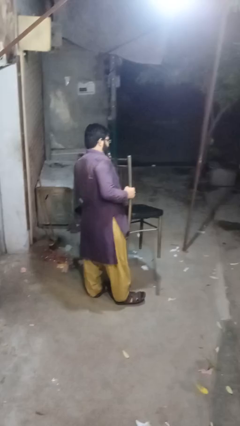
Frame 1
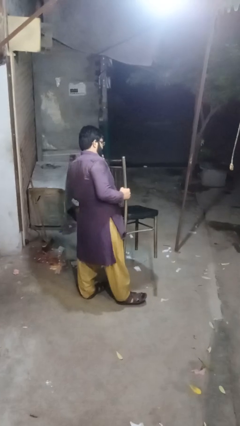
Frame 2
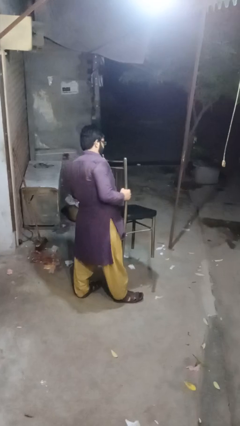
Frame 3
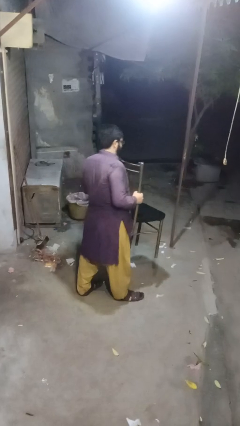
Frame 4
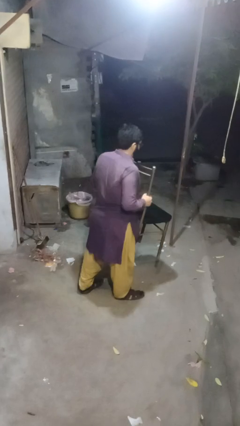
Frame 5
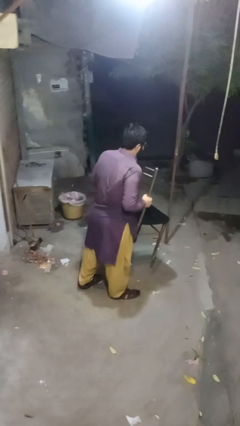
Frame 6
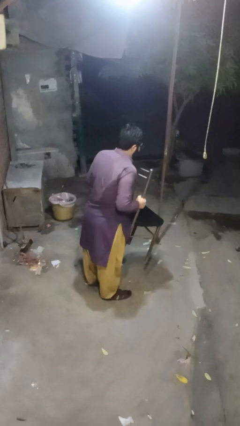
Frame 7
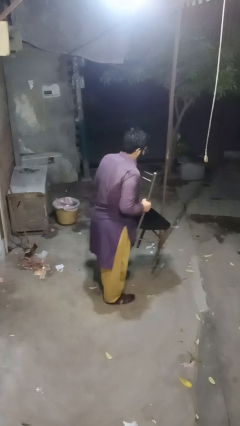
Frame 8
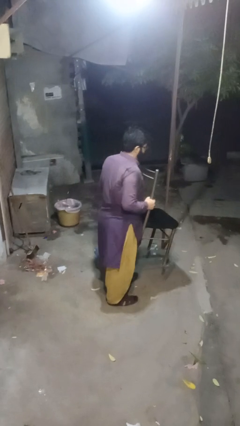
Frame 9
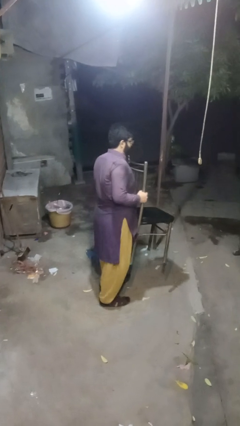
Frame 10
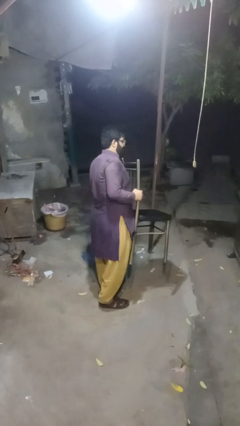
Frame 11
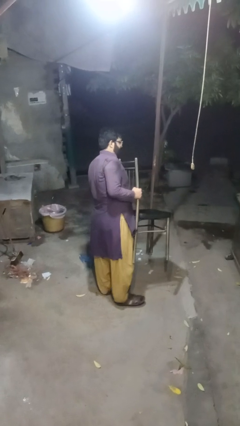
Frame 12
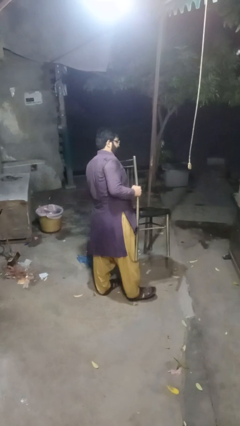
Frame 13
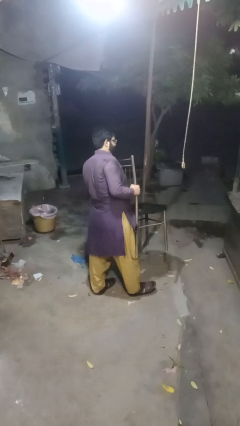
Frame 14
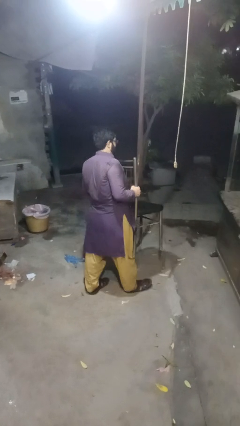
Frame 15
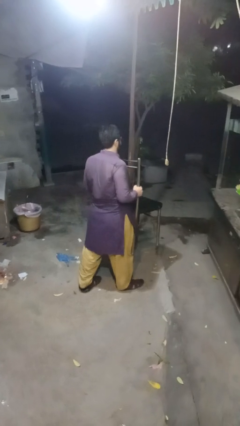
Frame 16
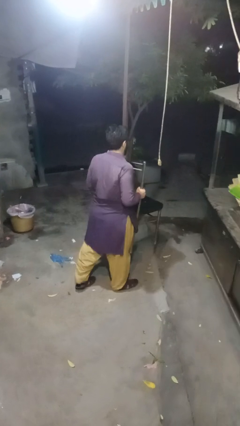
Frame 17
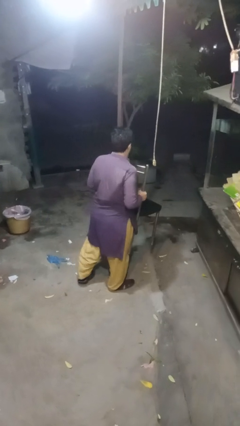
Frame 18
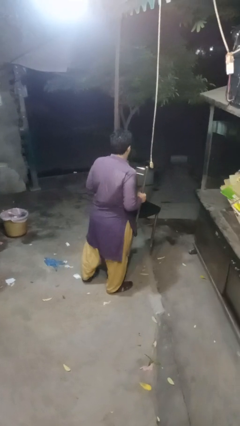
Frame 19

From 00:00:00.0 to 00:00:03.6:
person carries furniture

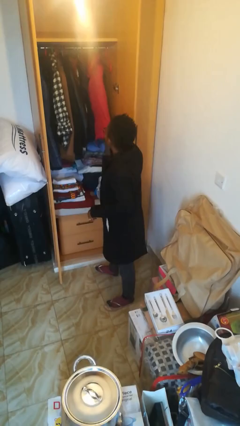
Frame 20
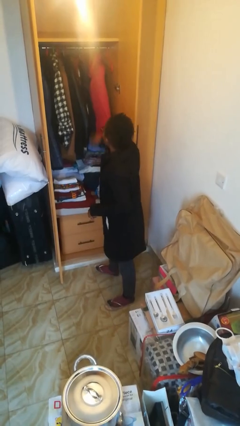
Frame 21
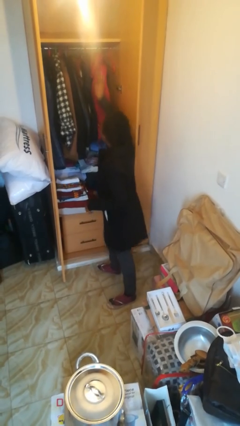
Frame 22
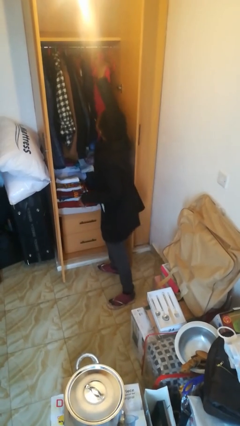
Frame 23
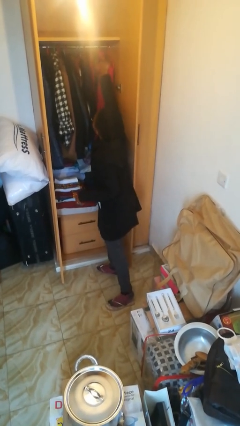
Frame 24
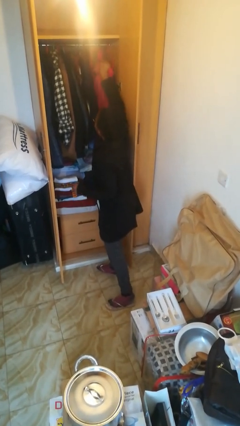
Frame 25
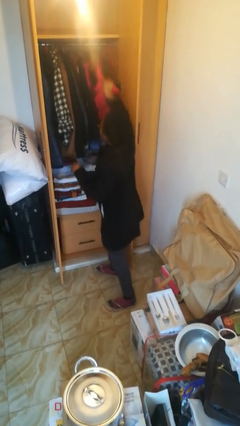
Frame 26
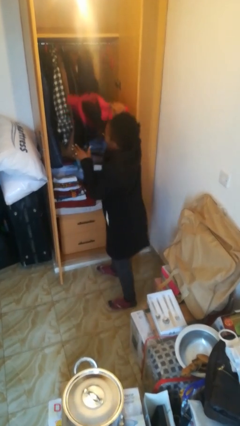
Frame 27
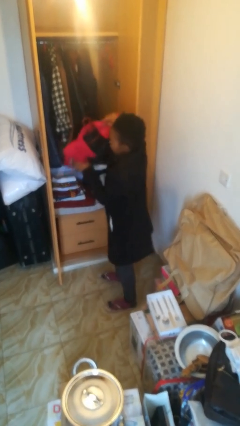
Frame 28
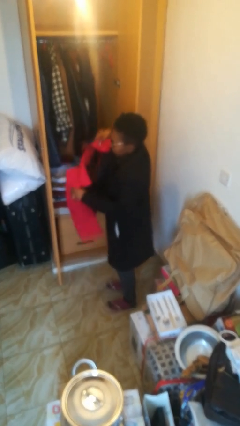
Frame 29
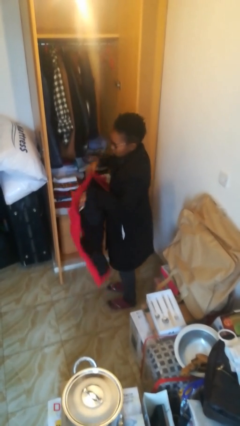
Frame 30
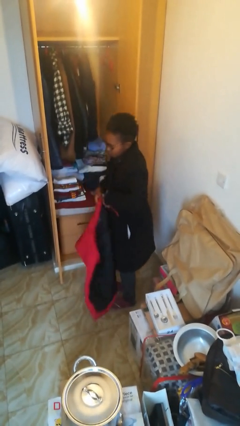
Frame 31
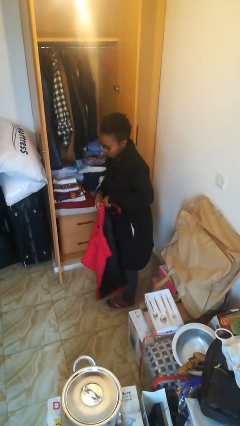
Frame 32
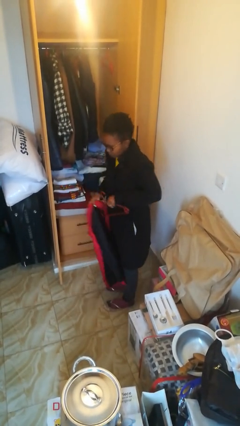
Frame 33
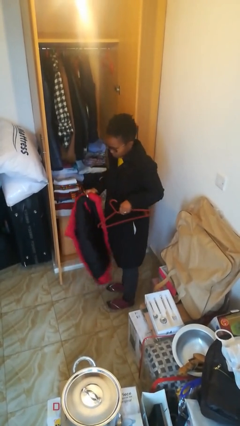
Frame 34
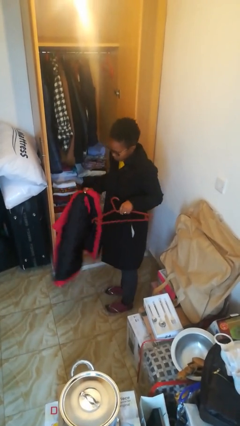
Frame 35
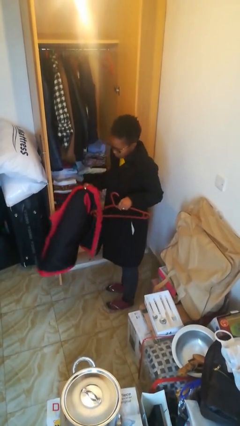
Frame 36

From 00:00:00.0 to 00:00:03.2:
person takes clothes from closet

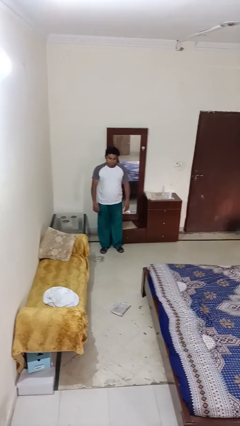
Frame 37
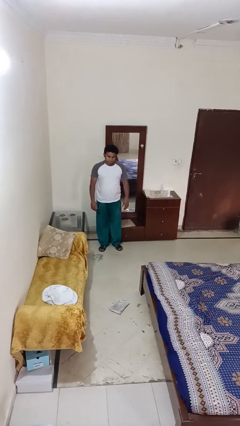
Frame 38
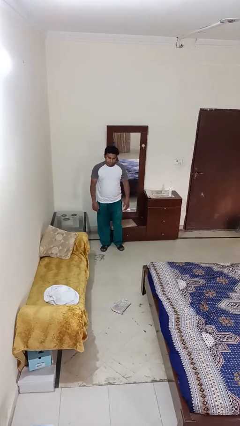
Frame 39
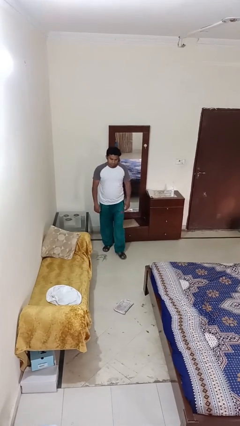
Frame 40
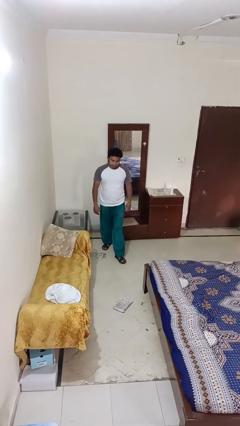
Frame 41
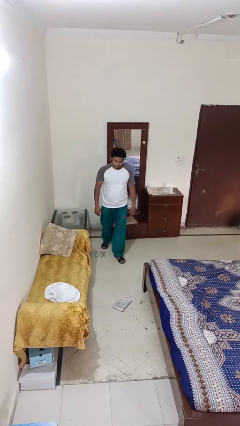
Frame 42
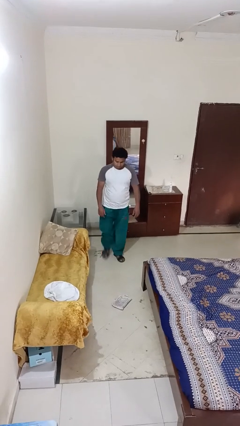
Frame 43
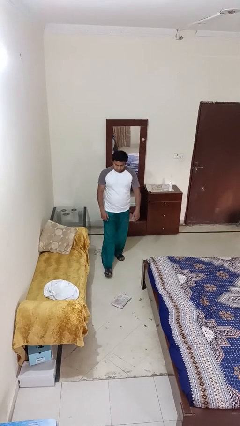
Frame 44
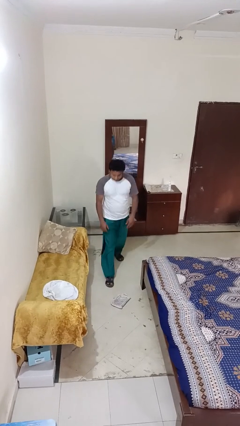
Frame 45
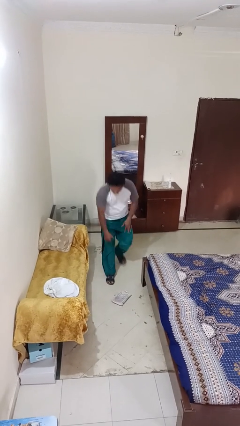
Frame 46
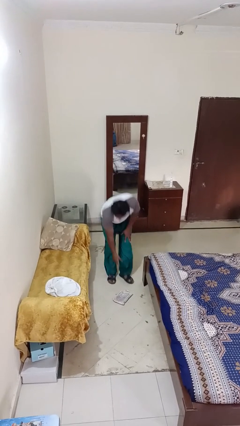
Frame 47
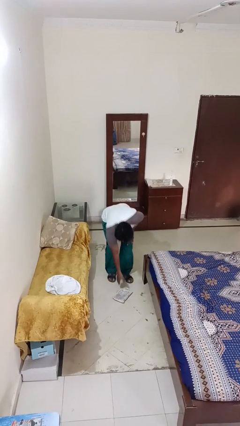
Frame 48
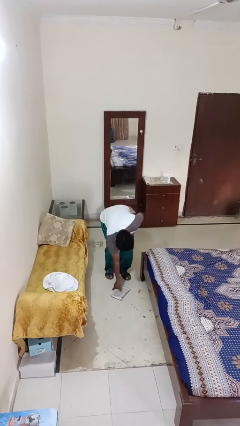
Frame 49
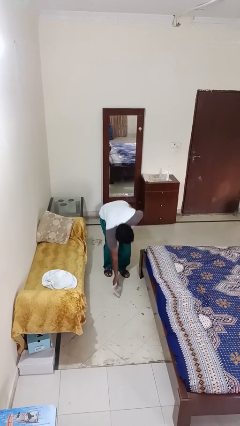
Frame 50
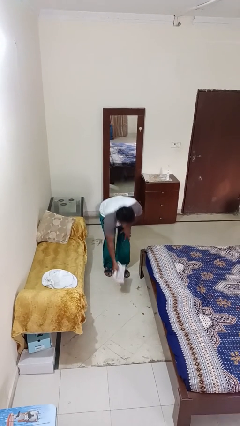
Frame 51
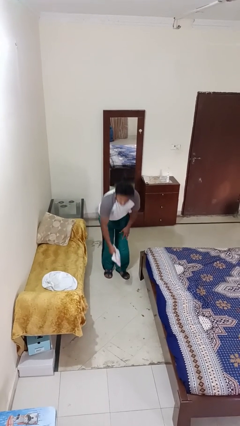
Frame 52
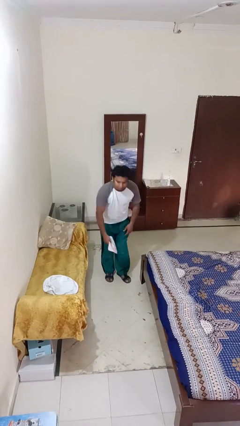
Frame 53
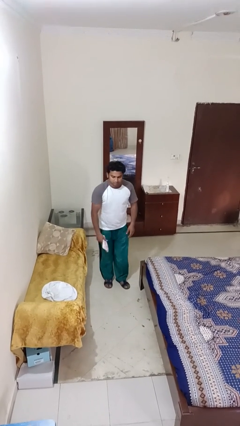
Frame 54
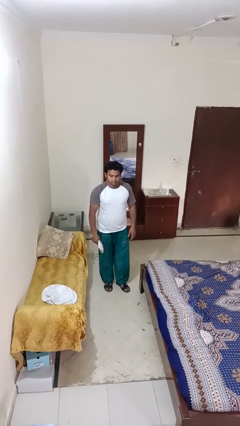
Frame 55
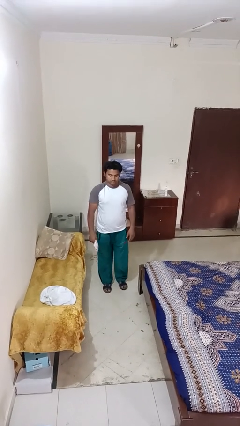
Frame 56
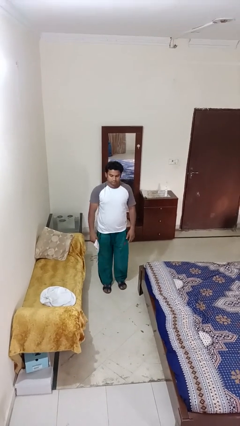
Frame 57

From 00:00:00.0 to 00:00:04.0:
person picks up object from floor

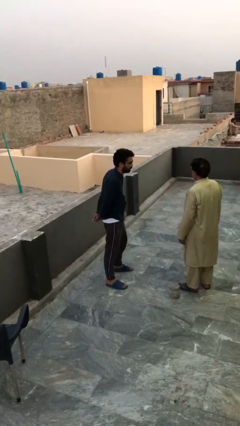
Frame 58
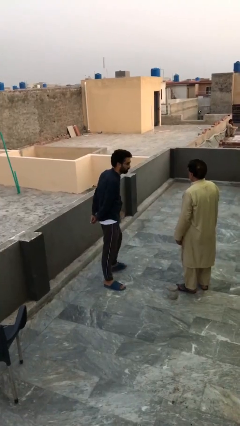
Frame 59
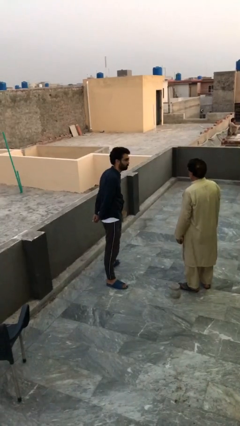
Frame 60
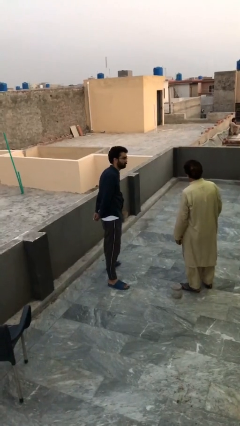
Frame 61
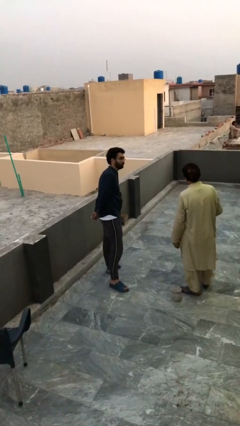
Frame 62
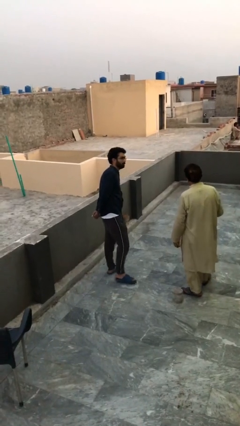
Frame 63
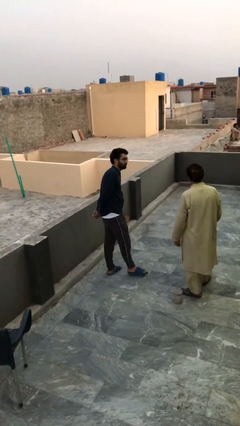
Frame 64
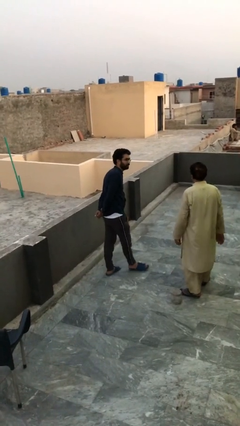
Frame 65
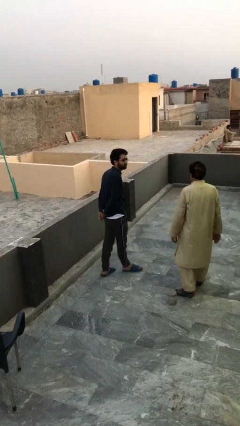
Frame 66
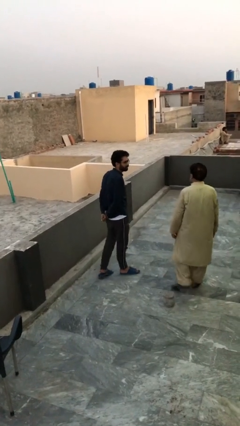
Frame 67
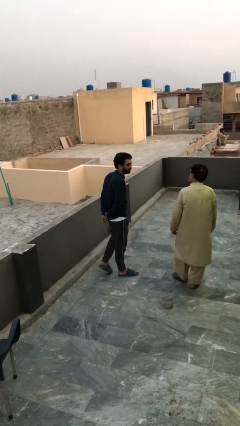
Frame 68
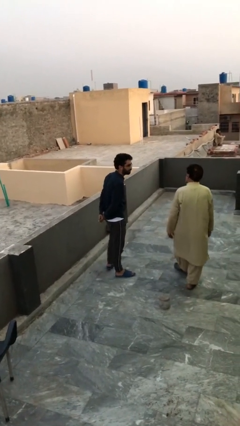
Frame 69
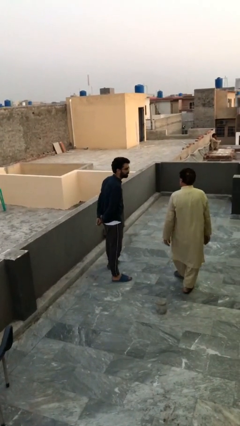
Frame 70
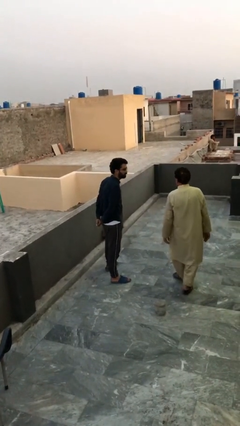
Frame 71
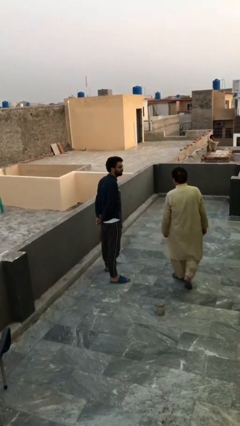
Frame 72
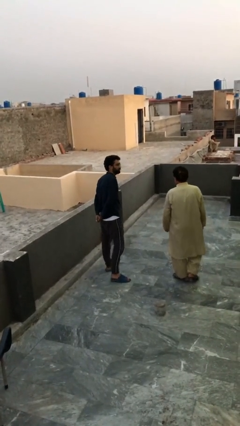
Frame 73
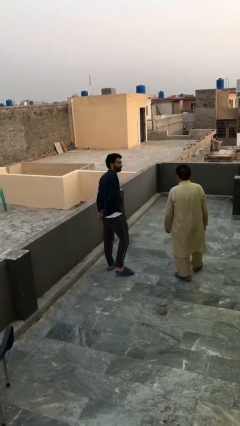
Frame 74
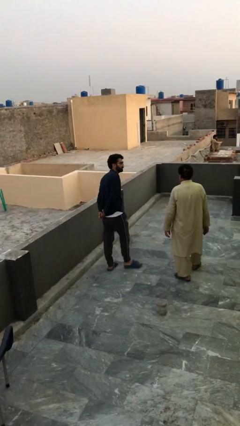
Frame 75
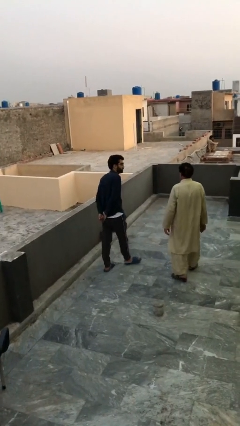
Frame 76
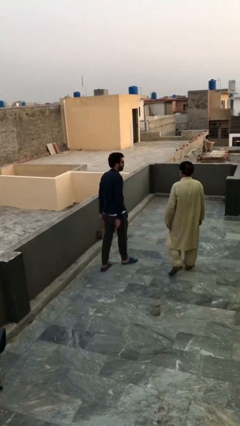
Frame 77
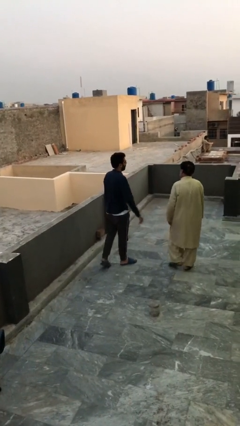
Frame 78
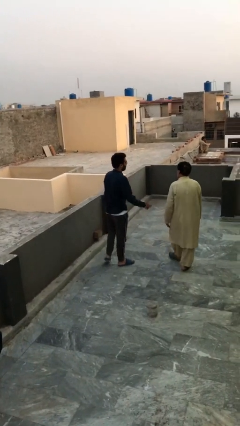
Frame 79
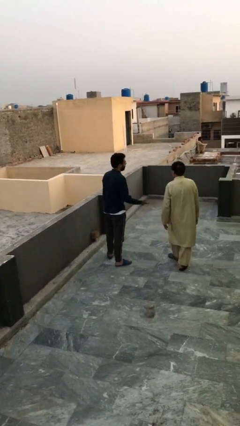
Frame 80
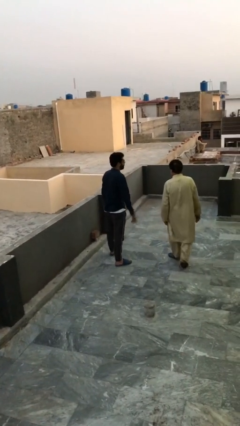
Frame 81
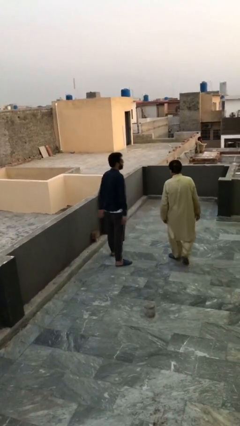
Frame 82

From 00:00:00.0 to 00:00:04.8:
person talks to person

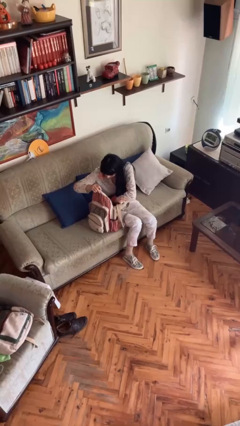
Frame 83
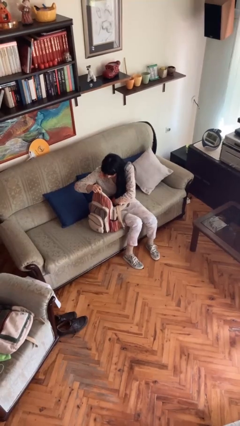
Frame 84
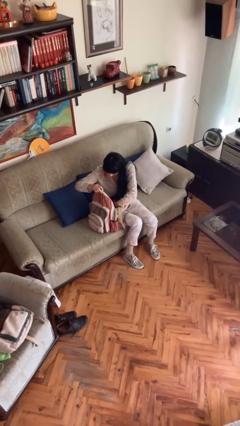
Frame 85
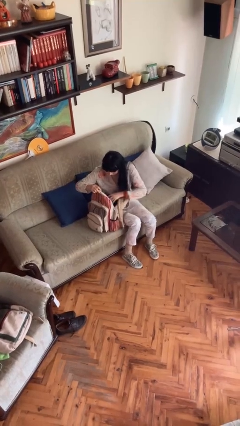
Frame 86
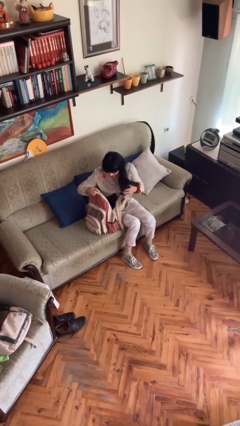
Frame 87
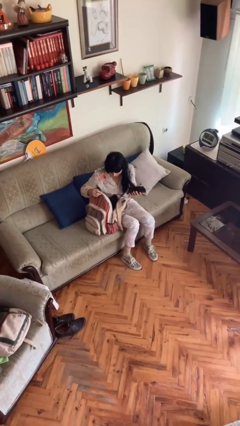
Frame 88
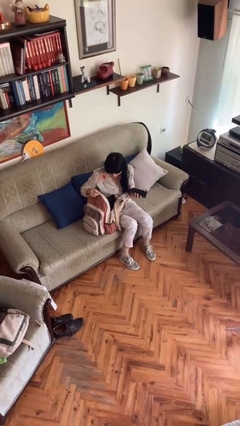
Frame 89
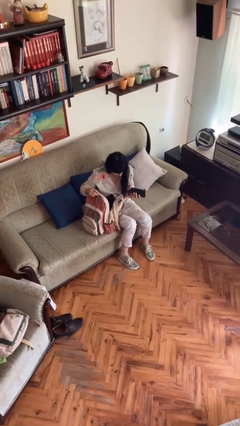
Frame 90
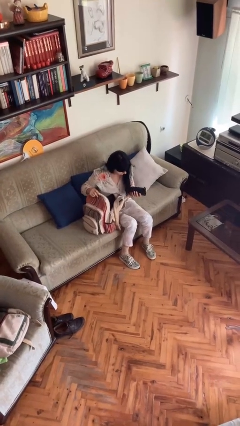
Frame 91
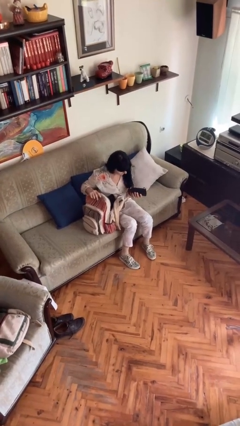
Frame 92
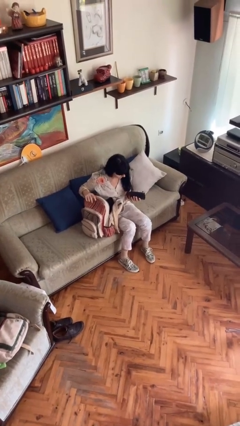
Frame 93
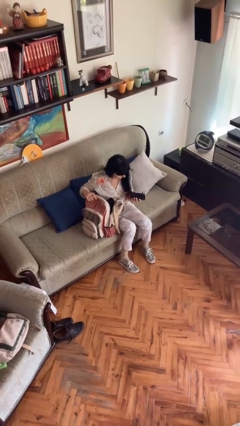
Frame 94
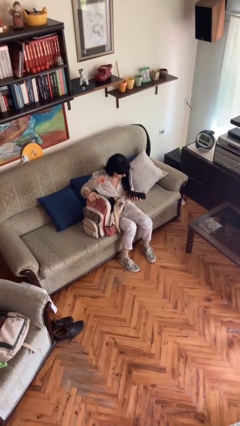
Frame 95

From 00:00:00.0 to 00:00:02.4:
person takes object from backpack
